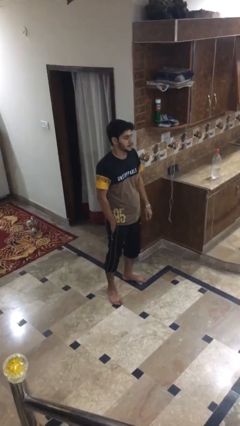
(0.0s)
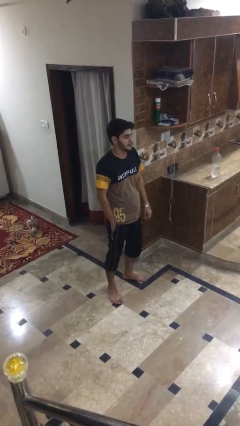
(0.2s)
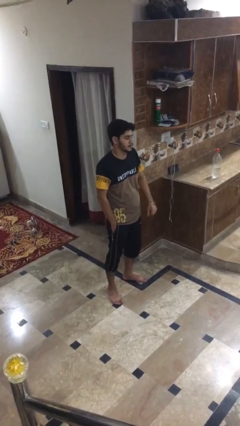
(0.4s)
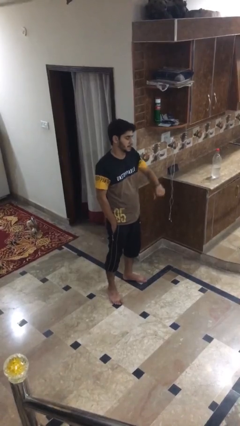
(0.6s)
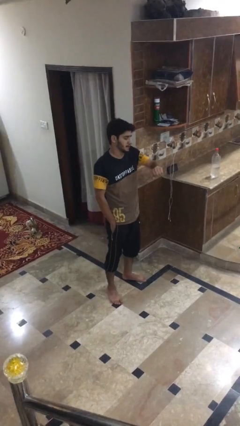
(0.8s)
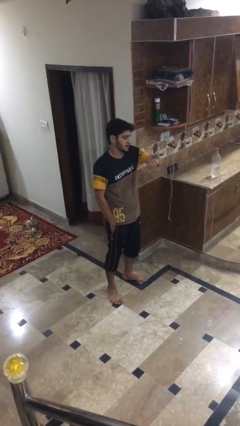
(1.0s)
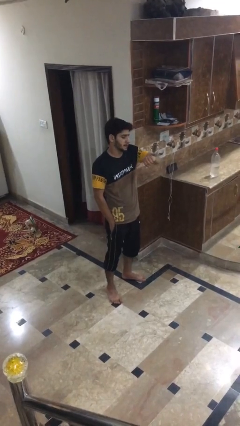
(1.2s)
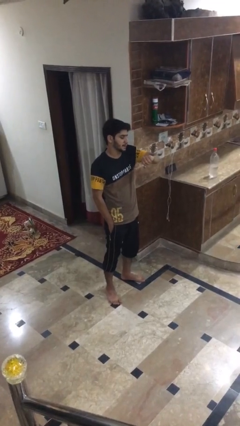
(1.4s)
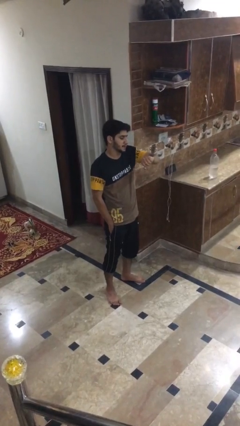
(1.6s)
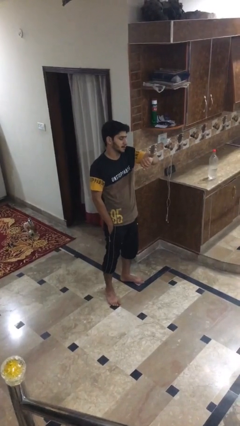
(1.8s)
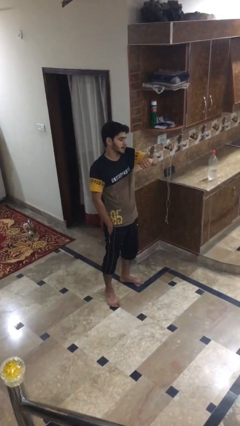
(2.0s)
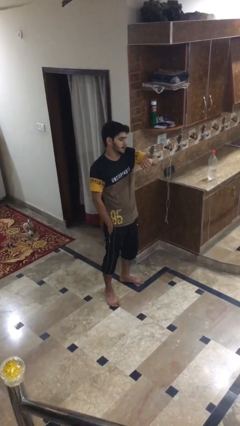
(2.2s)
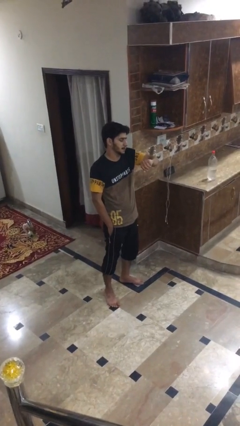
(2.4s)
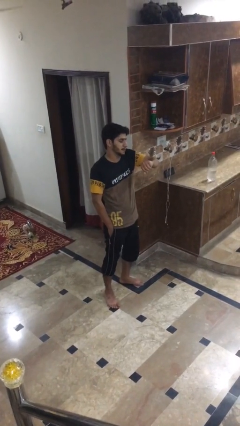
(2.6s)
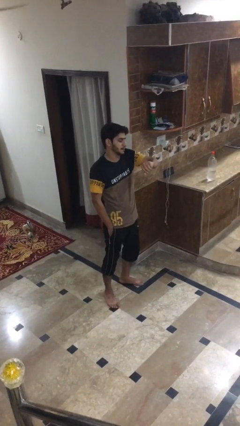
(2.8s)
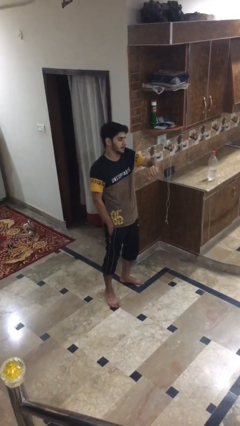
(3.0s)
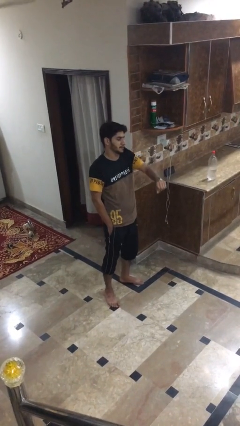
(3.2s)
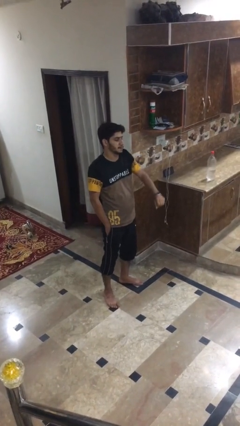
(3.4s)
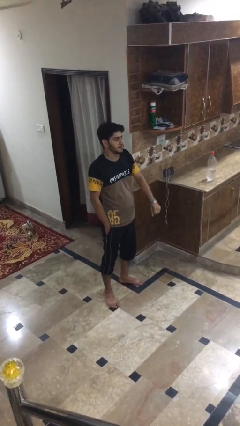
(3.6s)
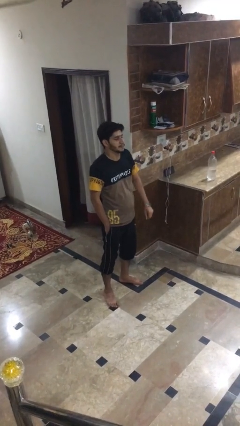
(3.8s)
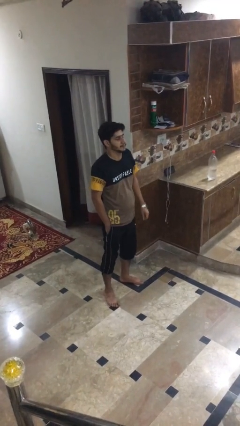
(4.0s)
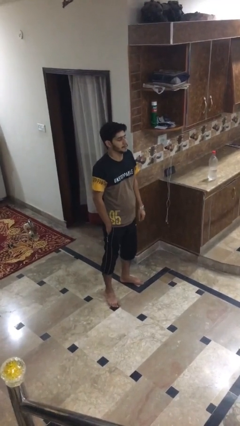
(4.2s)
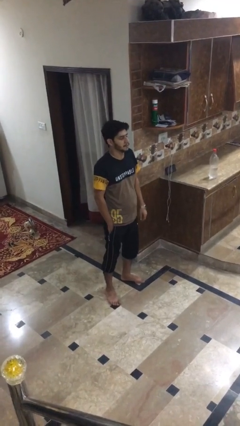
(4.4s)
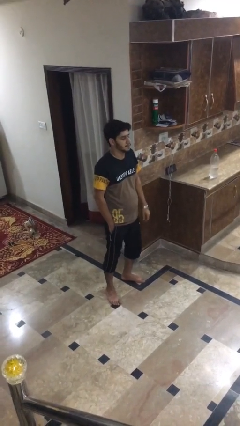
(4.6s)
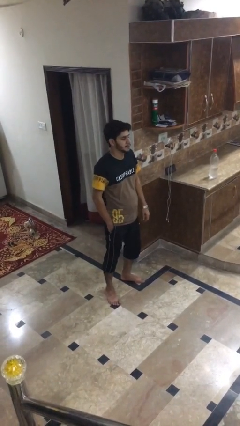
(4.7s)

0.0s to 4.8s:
person looks at wristwatch

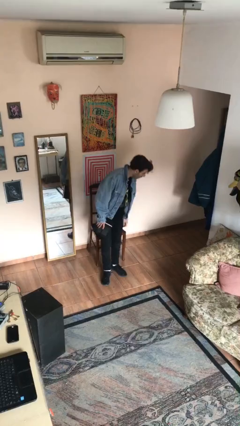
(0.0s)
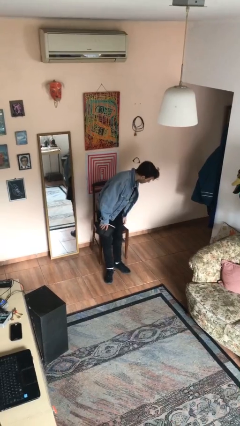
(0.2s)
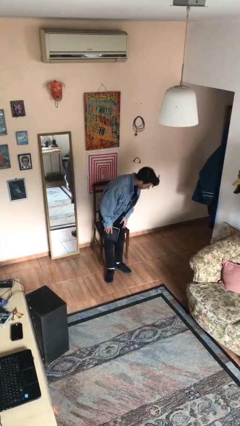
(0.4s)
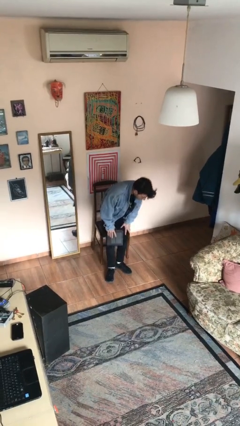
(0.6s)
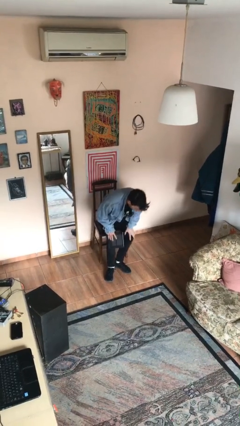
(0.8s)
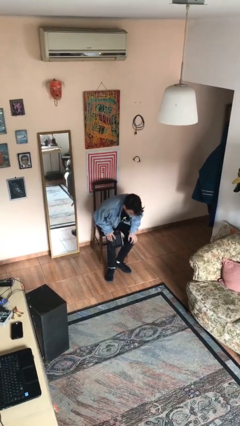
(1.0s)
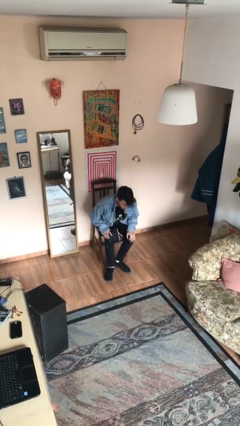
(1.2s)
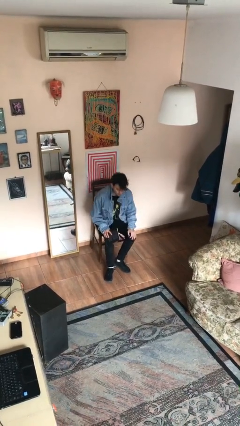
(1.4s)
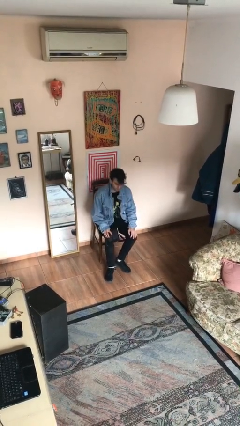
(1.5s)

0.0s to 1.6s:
person sits down

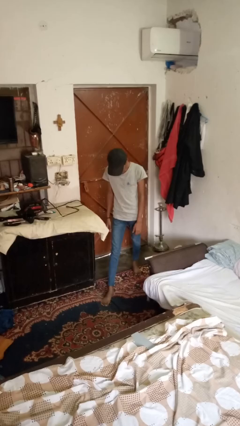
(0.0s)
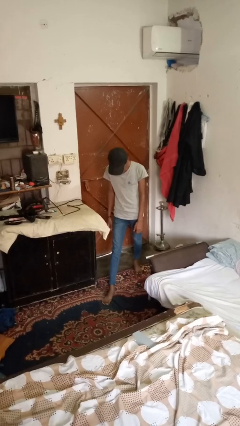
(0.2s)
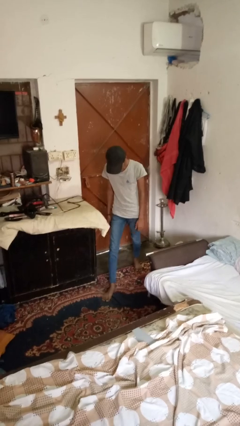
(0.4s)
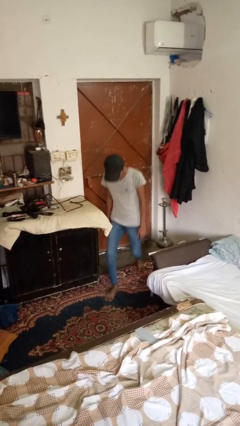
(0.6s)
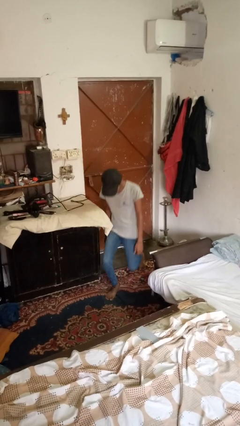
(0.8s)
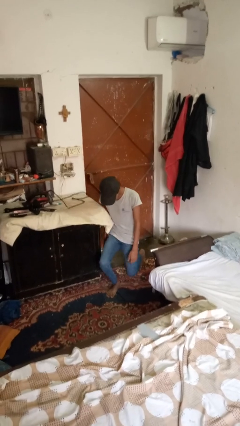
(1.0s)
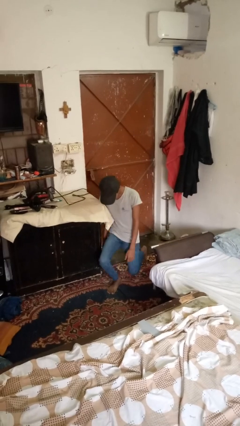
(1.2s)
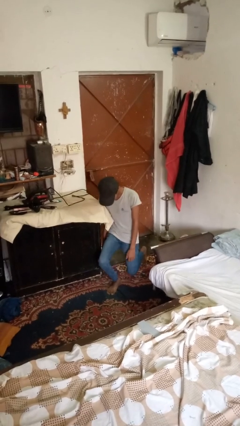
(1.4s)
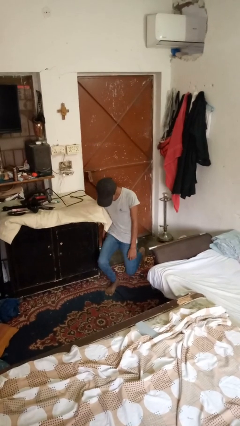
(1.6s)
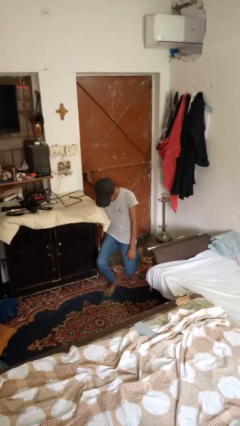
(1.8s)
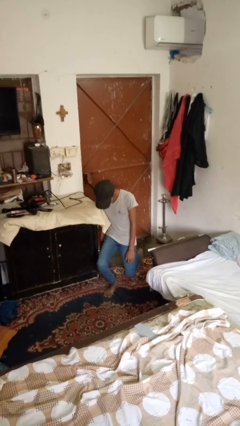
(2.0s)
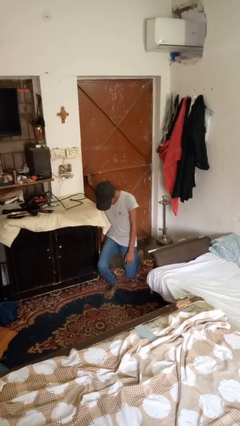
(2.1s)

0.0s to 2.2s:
person exercises with lunges

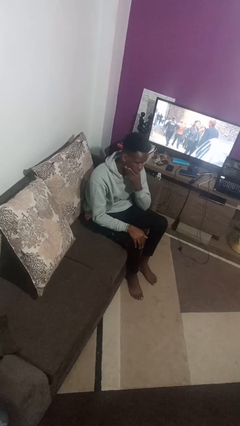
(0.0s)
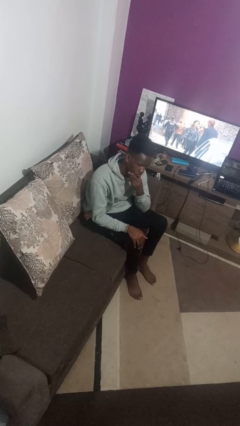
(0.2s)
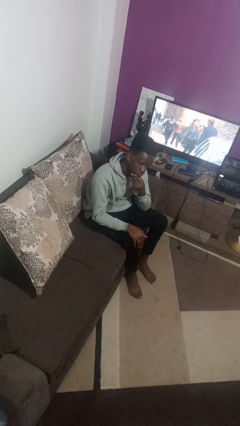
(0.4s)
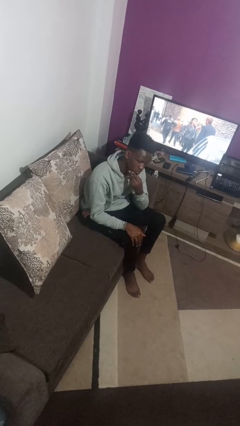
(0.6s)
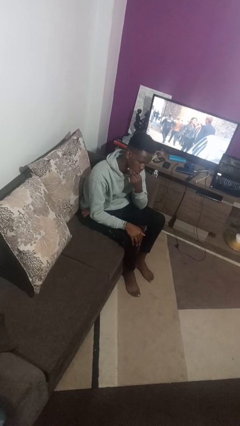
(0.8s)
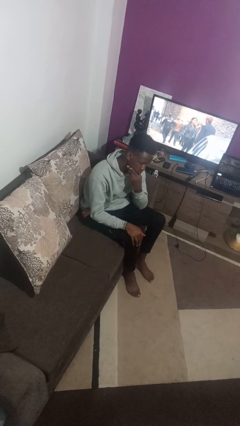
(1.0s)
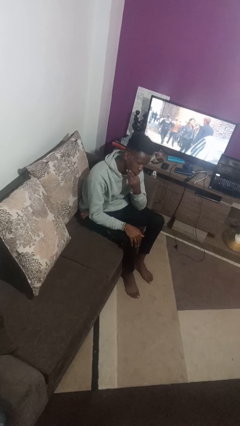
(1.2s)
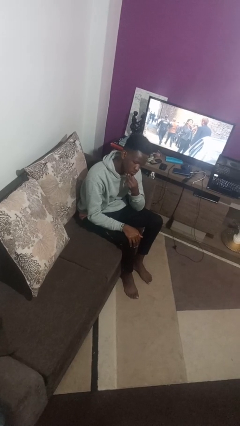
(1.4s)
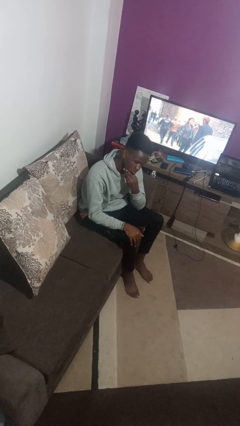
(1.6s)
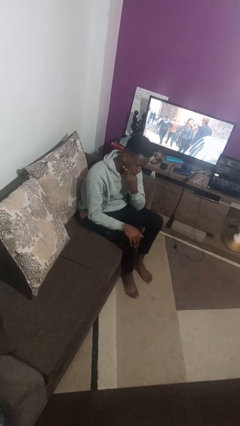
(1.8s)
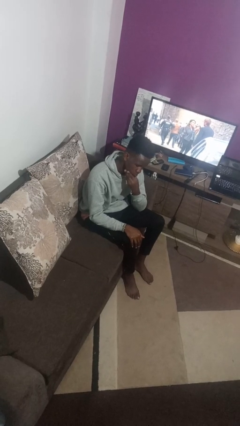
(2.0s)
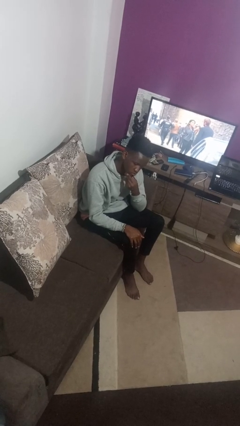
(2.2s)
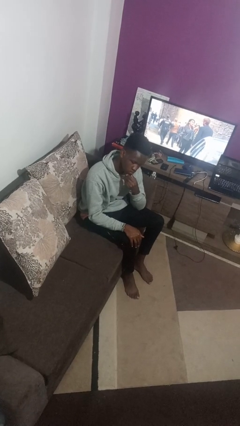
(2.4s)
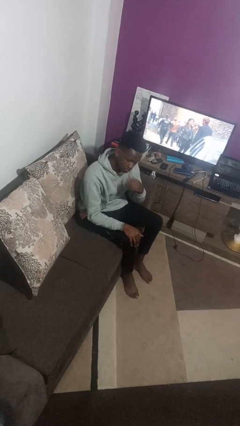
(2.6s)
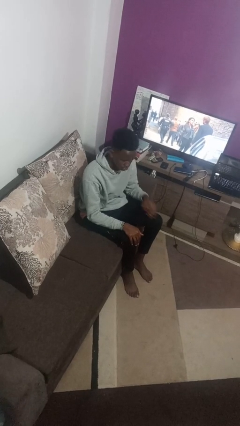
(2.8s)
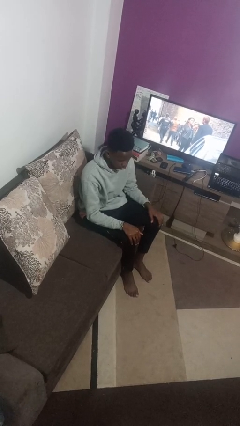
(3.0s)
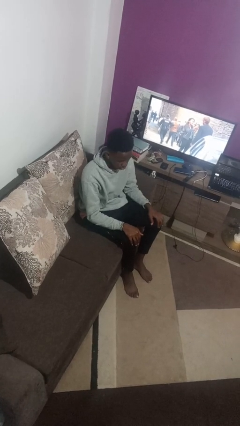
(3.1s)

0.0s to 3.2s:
person strokes chin

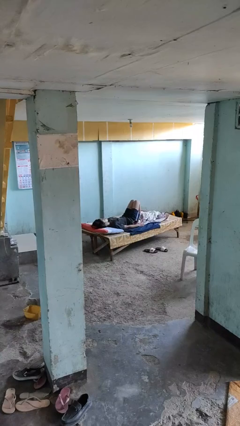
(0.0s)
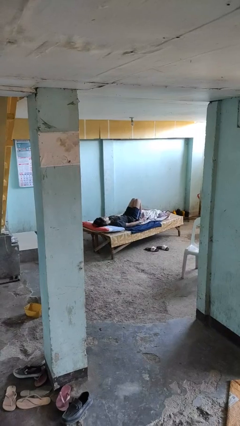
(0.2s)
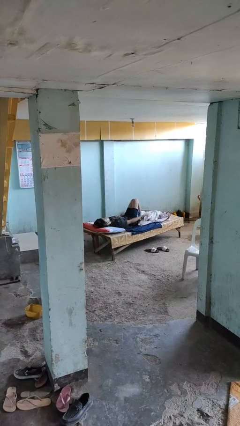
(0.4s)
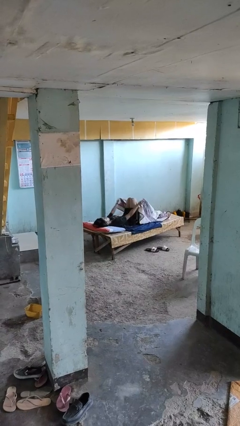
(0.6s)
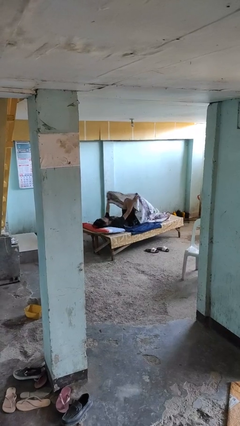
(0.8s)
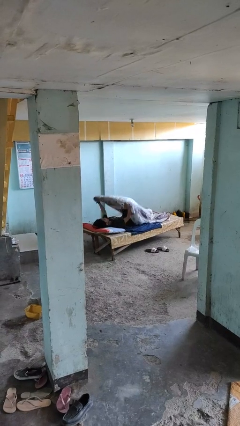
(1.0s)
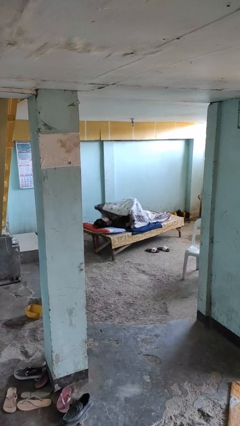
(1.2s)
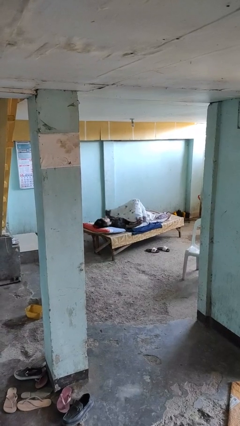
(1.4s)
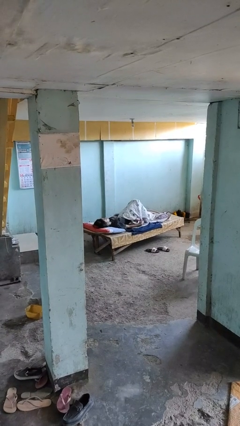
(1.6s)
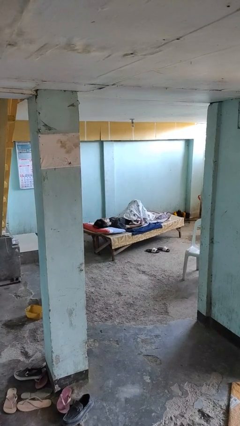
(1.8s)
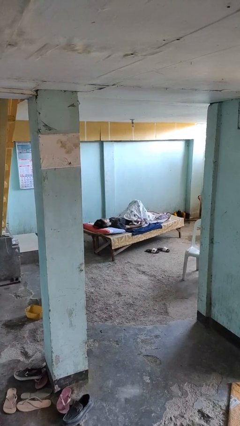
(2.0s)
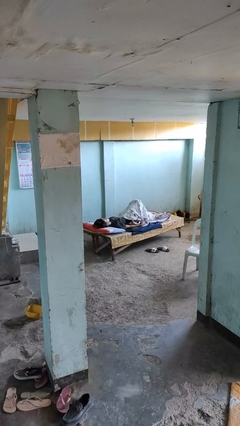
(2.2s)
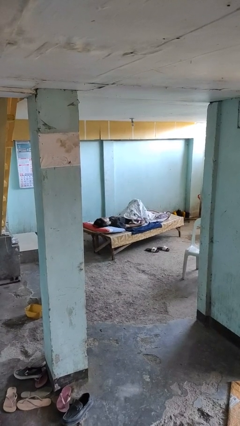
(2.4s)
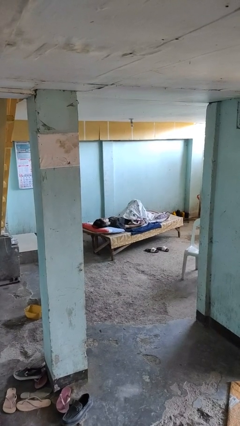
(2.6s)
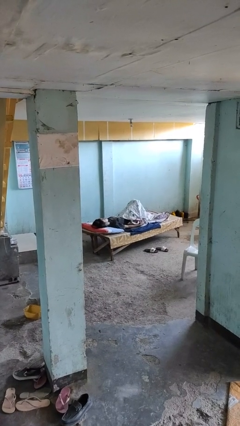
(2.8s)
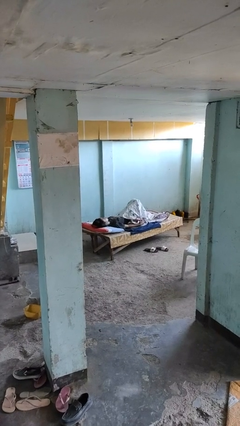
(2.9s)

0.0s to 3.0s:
person covers with bedsheets

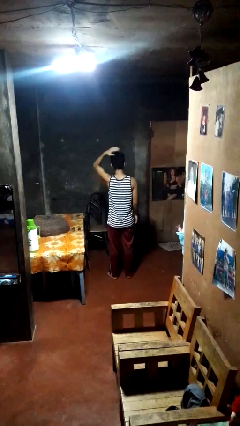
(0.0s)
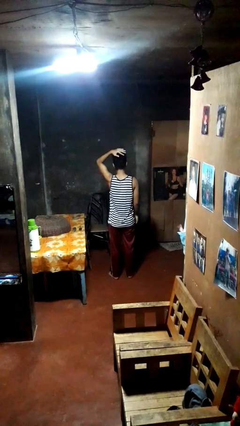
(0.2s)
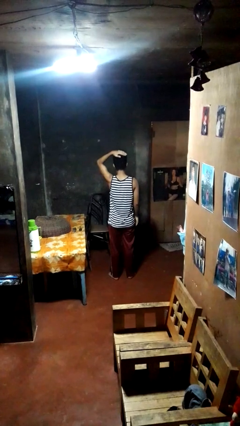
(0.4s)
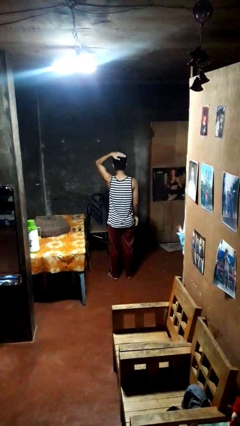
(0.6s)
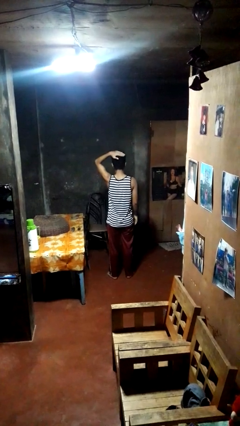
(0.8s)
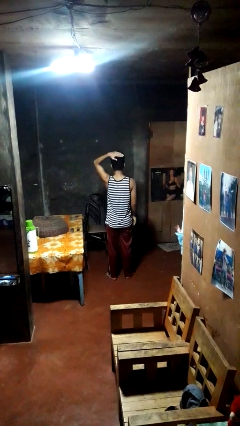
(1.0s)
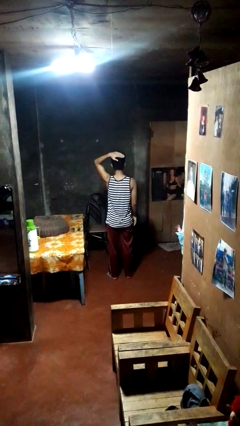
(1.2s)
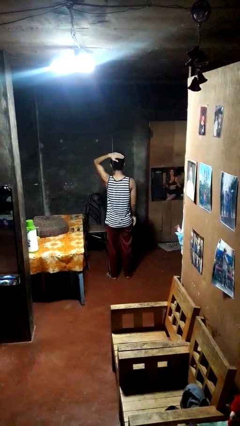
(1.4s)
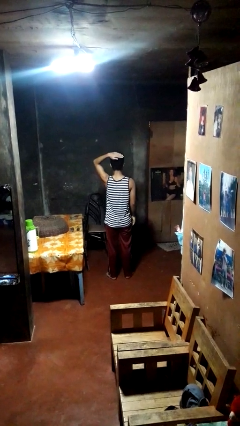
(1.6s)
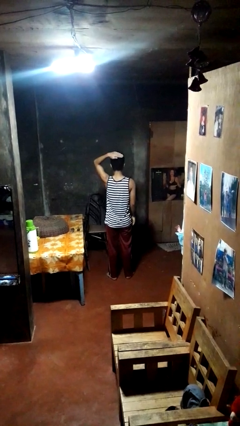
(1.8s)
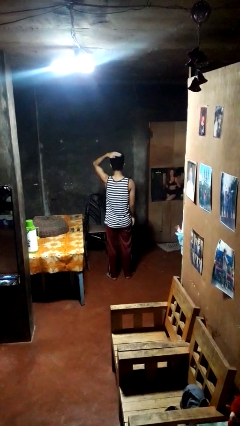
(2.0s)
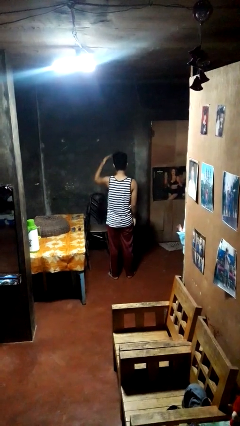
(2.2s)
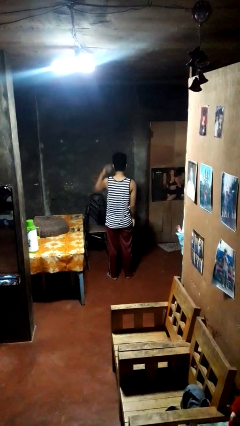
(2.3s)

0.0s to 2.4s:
person pats head

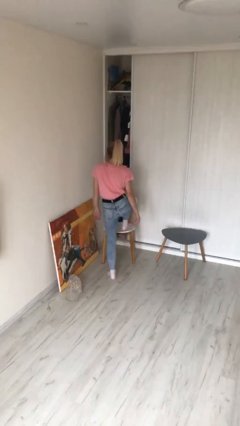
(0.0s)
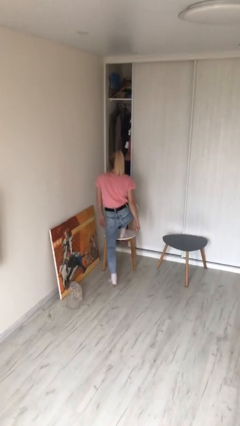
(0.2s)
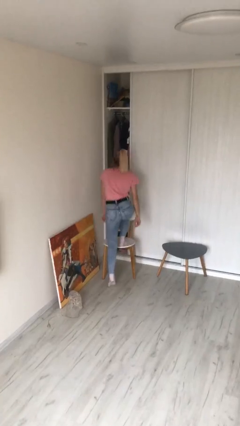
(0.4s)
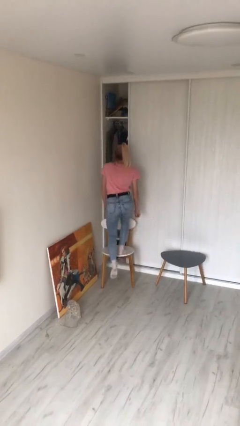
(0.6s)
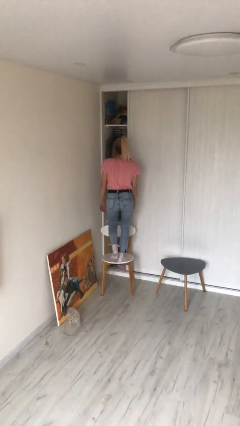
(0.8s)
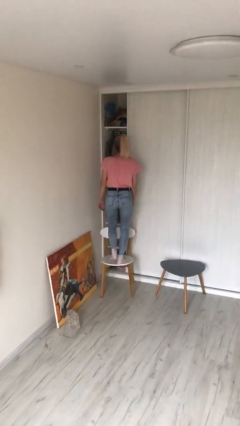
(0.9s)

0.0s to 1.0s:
person climbs on chair
